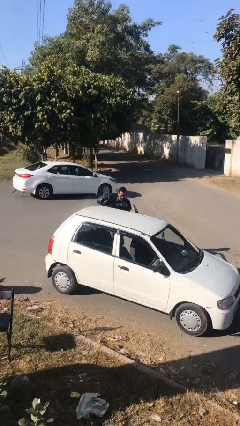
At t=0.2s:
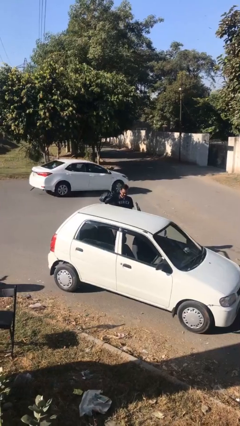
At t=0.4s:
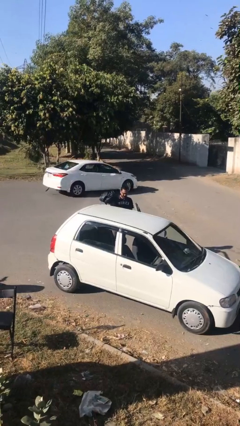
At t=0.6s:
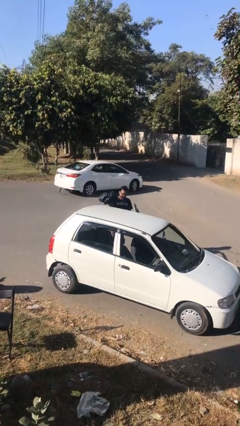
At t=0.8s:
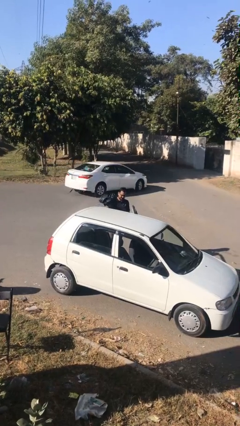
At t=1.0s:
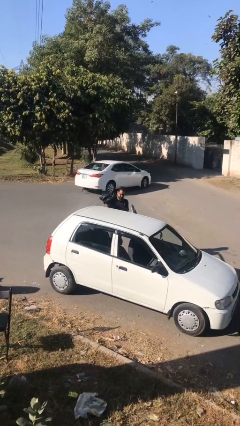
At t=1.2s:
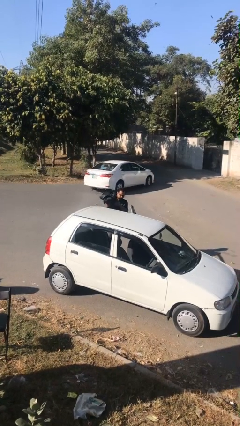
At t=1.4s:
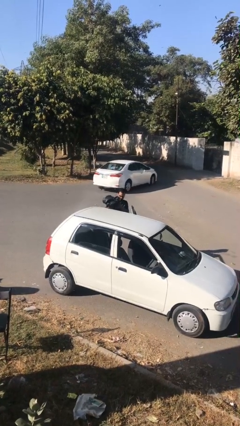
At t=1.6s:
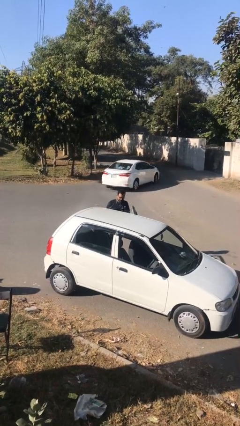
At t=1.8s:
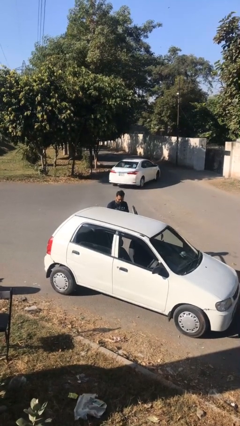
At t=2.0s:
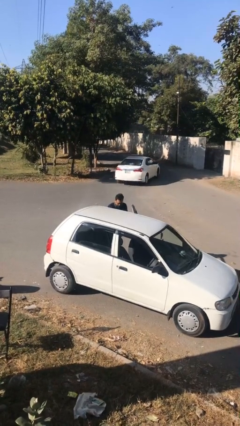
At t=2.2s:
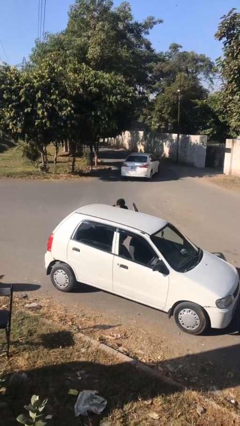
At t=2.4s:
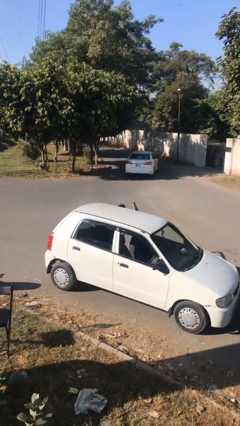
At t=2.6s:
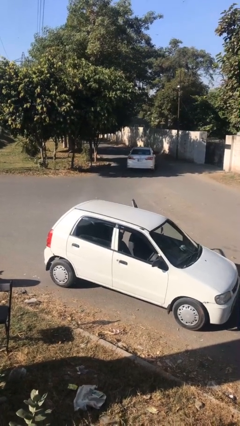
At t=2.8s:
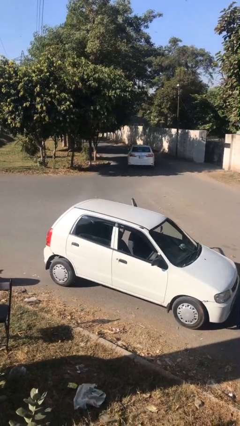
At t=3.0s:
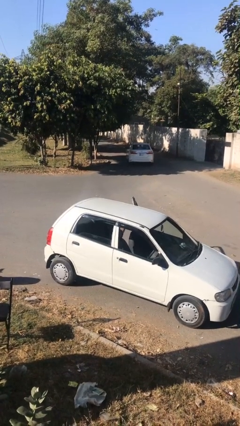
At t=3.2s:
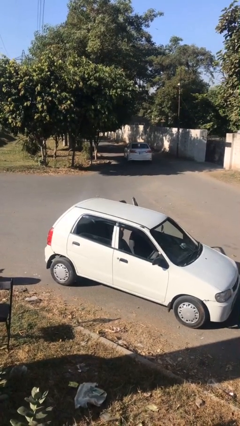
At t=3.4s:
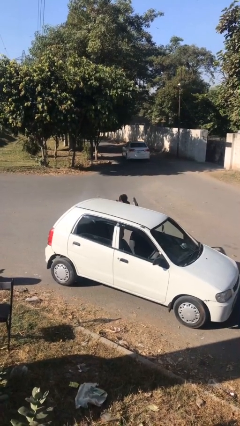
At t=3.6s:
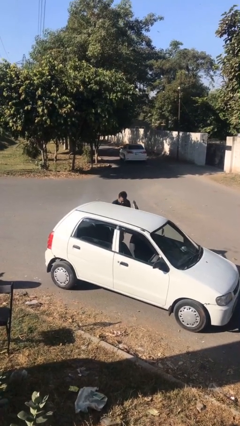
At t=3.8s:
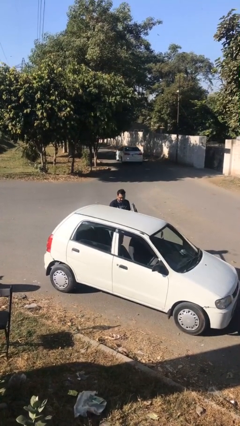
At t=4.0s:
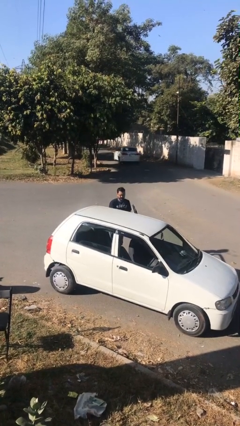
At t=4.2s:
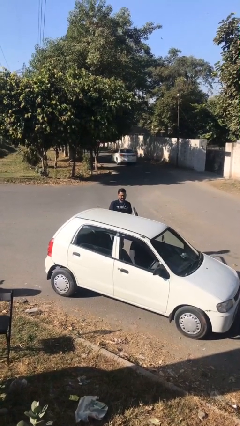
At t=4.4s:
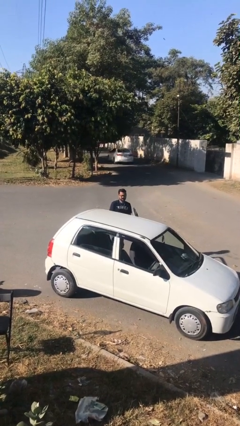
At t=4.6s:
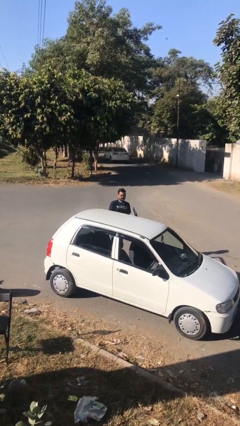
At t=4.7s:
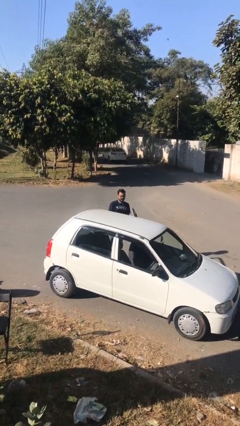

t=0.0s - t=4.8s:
person loads car

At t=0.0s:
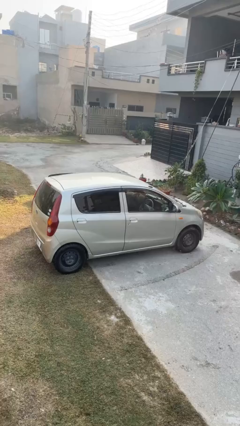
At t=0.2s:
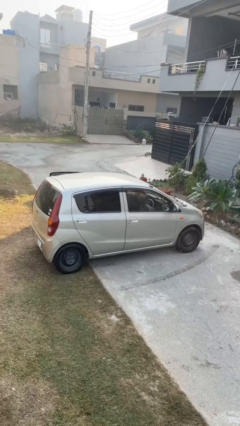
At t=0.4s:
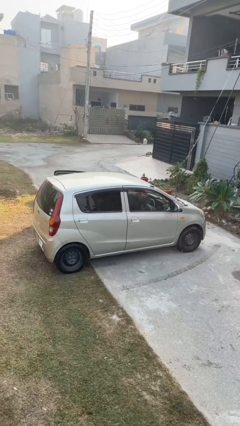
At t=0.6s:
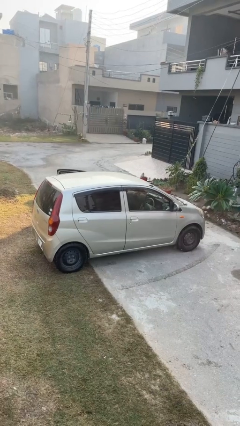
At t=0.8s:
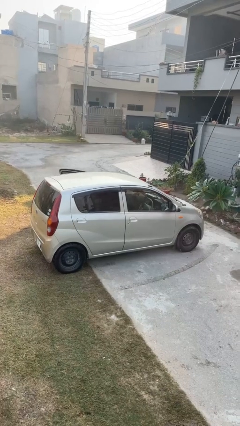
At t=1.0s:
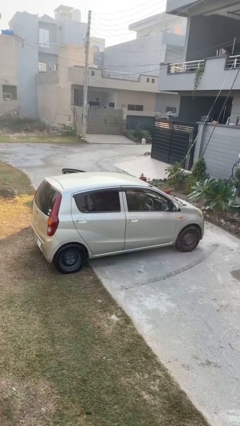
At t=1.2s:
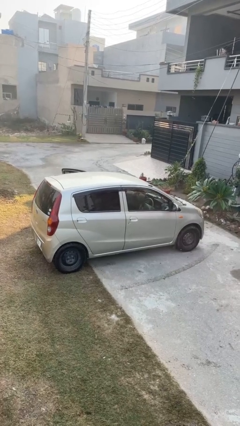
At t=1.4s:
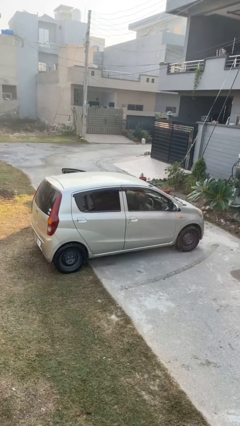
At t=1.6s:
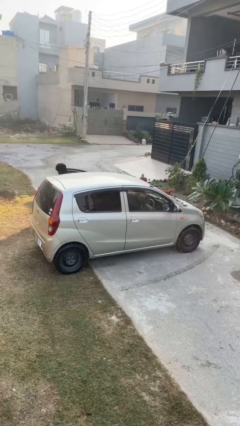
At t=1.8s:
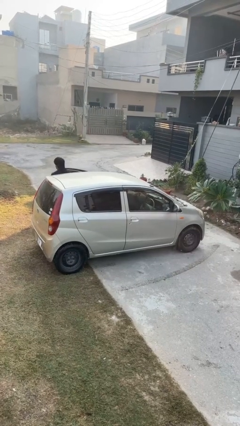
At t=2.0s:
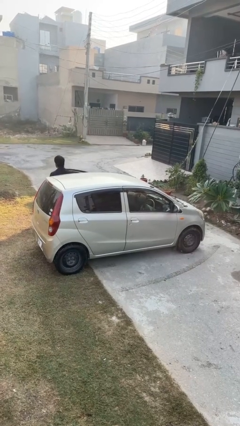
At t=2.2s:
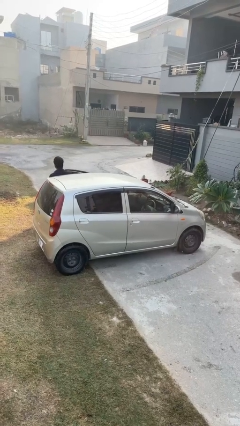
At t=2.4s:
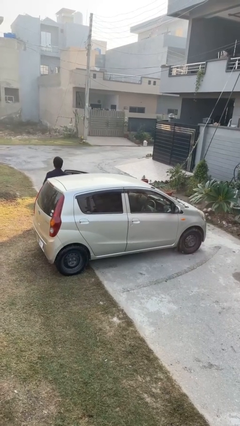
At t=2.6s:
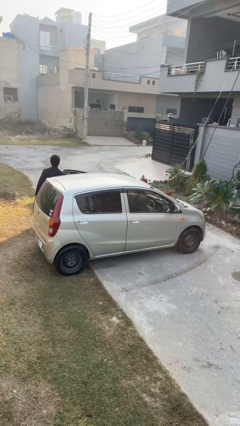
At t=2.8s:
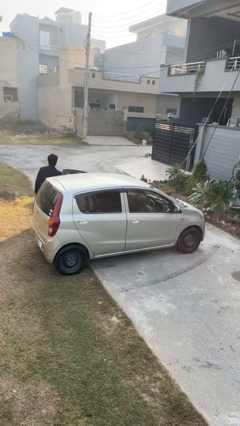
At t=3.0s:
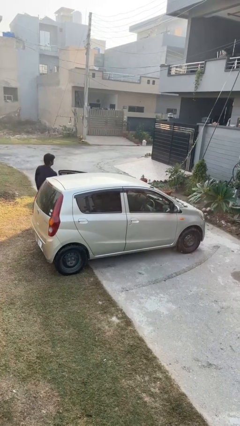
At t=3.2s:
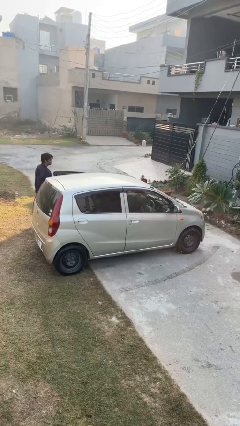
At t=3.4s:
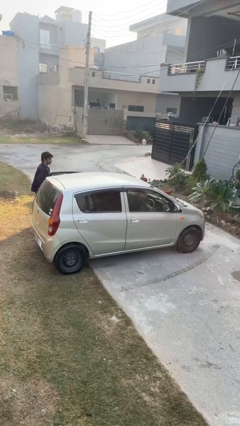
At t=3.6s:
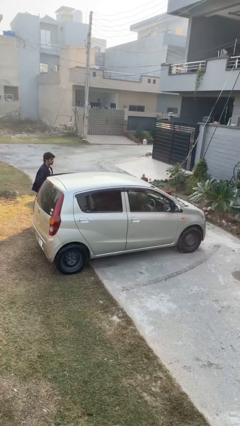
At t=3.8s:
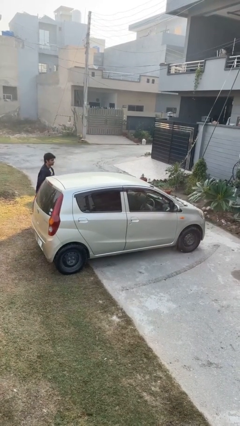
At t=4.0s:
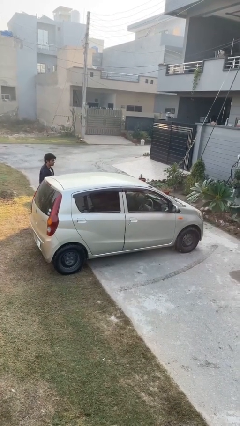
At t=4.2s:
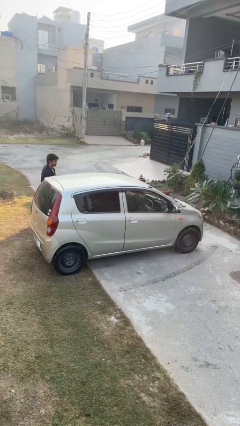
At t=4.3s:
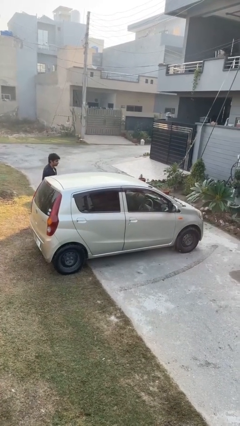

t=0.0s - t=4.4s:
car drops off person

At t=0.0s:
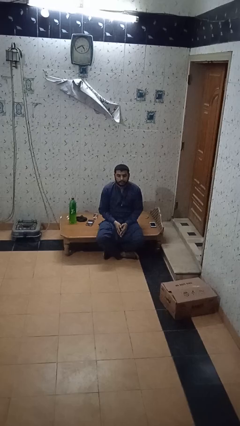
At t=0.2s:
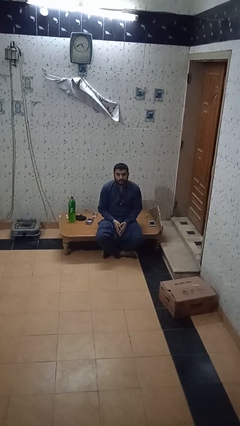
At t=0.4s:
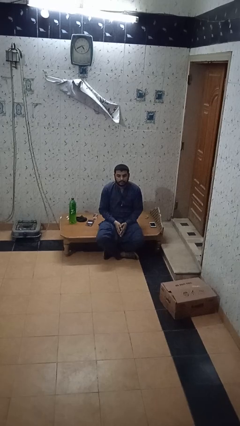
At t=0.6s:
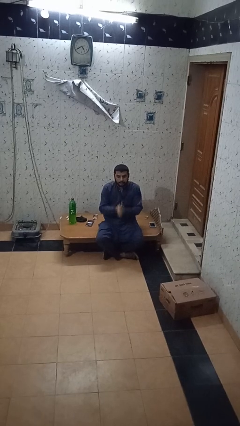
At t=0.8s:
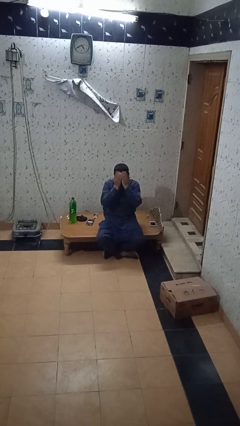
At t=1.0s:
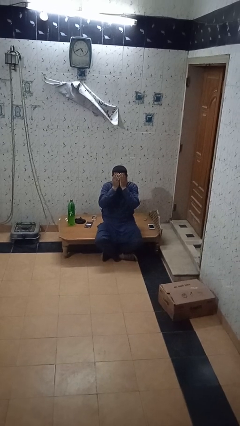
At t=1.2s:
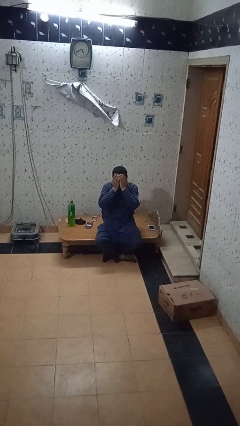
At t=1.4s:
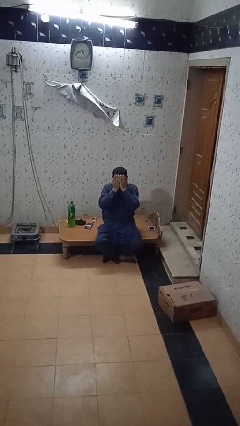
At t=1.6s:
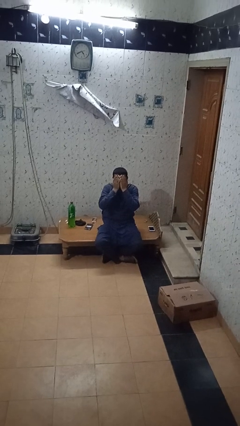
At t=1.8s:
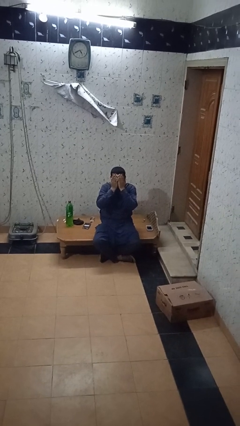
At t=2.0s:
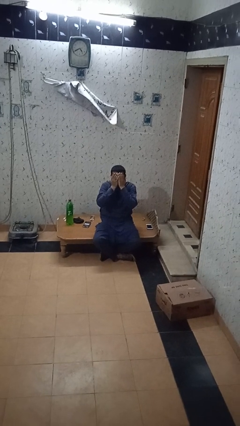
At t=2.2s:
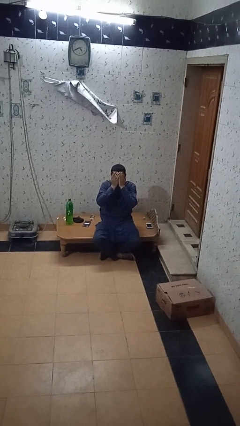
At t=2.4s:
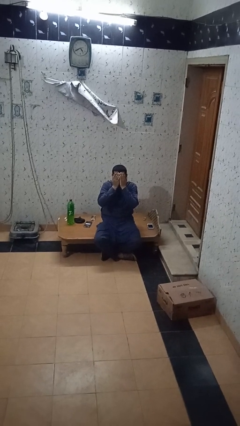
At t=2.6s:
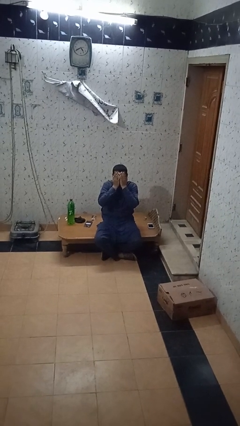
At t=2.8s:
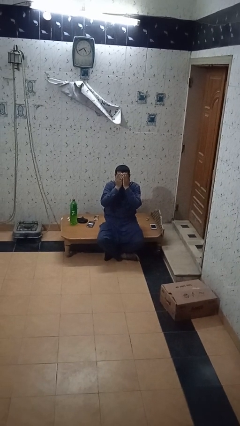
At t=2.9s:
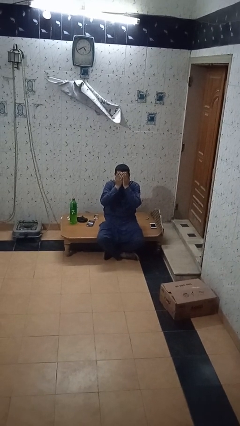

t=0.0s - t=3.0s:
person covers face with hands

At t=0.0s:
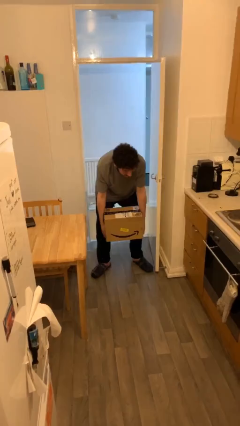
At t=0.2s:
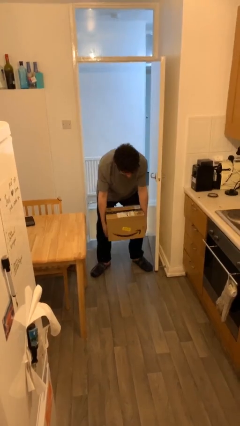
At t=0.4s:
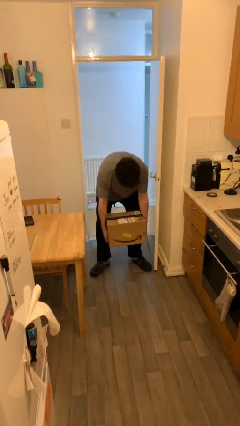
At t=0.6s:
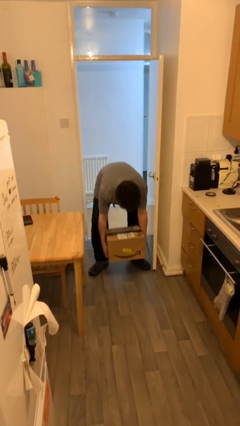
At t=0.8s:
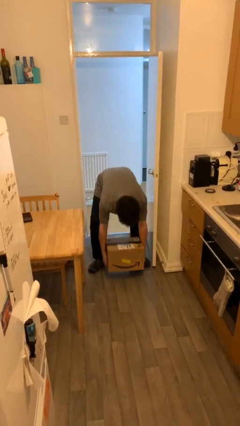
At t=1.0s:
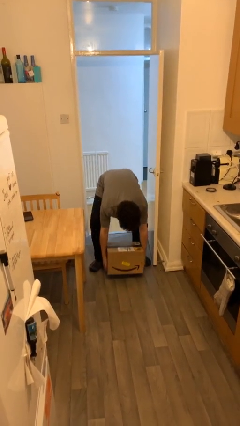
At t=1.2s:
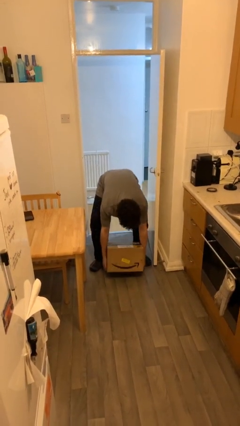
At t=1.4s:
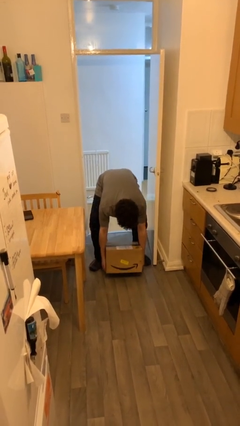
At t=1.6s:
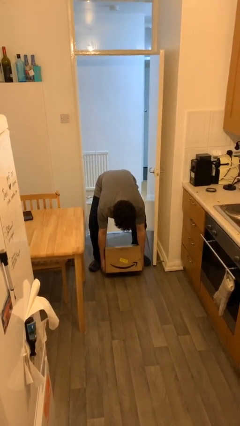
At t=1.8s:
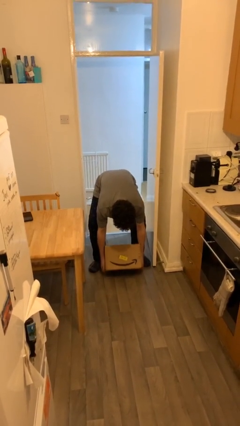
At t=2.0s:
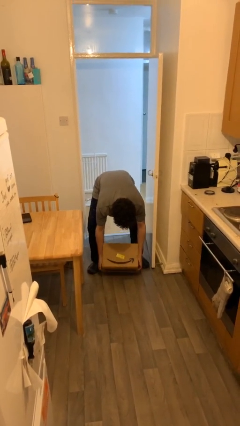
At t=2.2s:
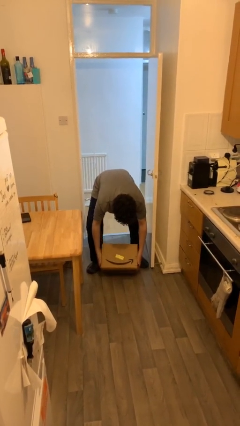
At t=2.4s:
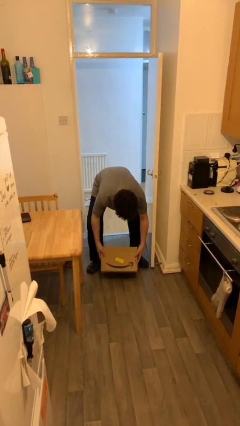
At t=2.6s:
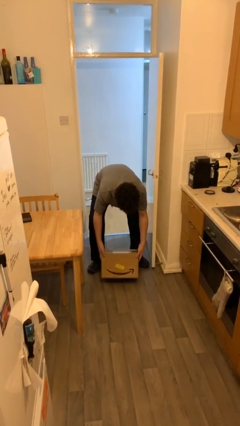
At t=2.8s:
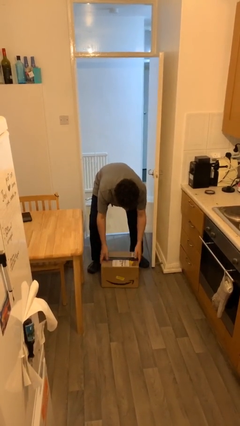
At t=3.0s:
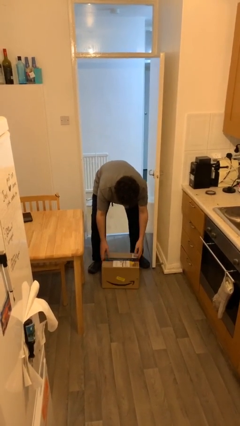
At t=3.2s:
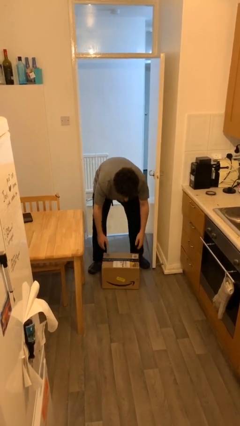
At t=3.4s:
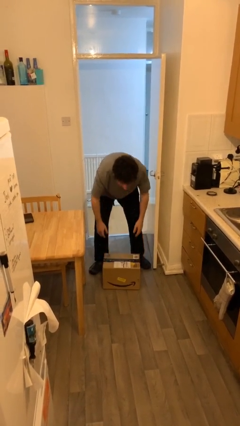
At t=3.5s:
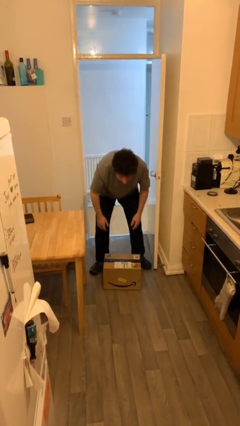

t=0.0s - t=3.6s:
person puts down object on floor

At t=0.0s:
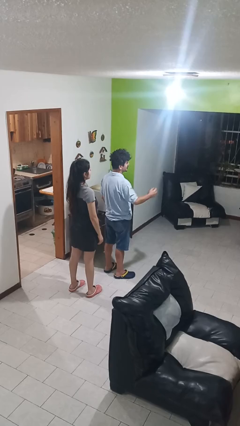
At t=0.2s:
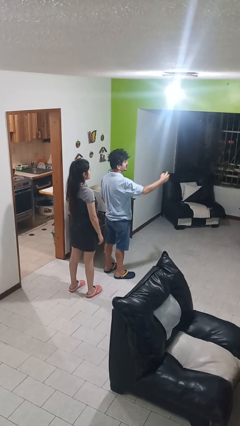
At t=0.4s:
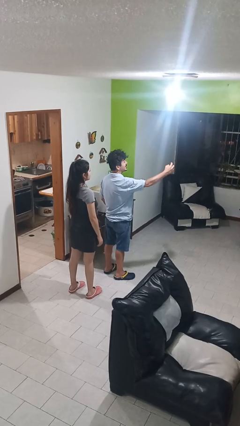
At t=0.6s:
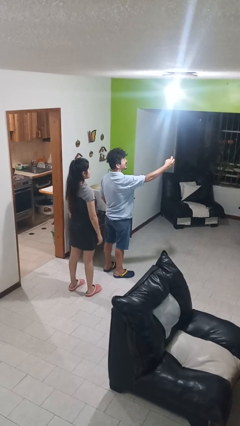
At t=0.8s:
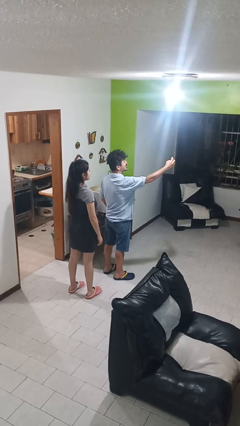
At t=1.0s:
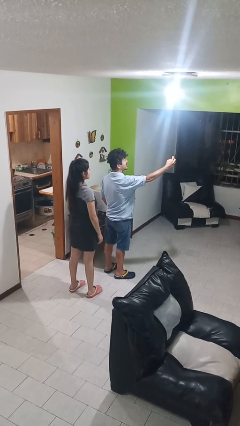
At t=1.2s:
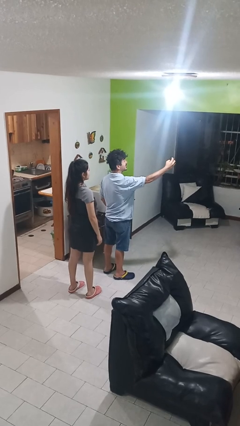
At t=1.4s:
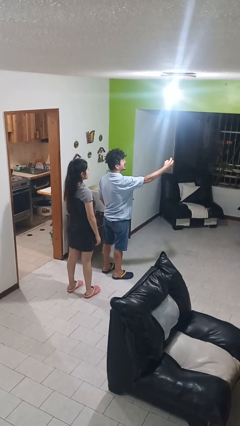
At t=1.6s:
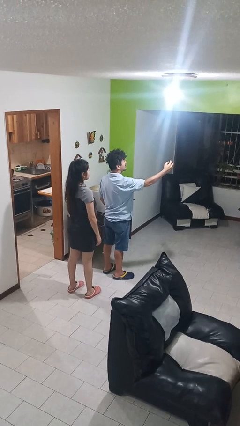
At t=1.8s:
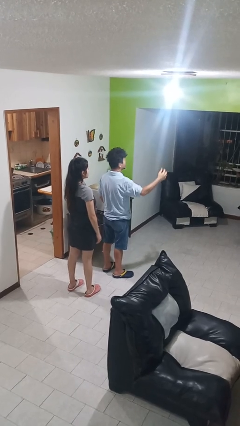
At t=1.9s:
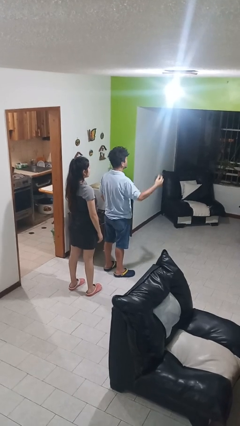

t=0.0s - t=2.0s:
person takes selfie with person
